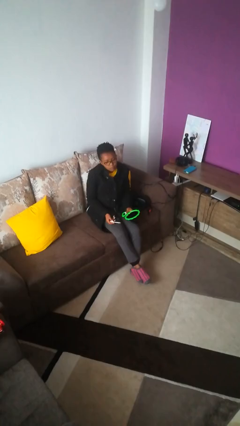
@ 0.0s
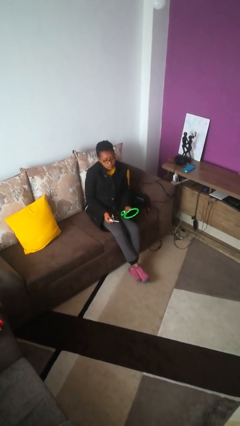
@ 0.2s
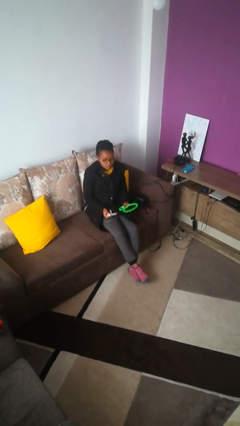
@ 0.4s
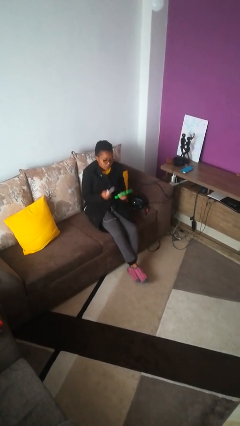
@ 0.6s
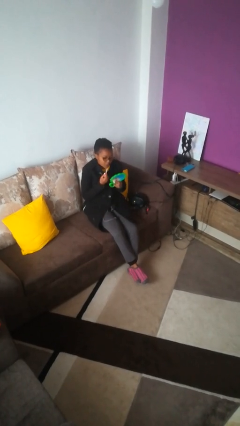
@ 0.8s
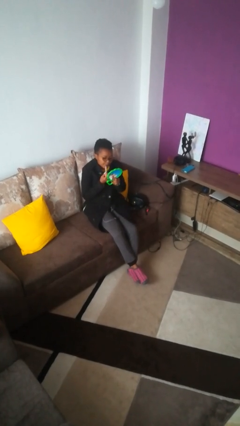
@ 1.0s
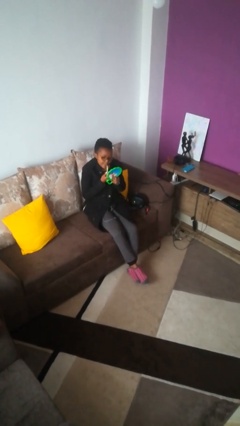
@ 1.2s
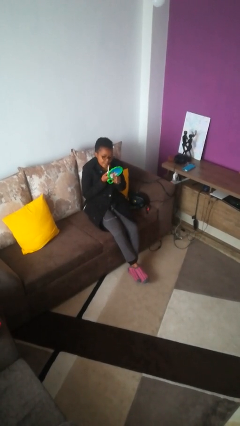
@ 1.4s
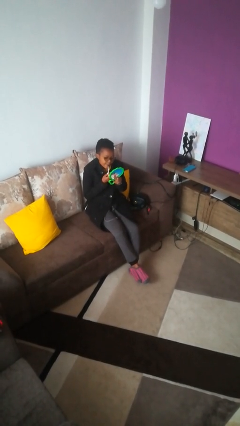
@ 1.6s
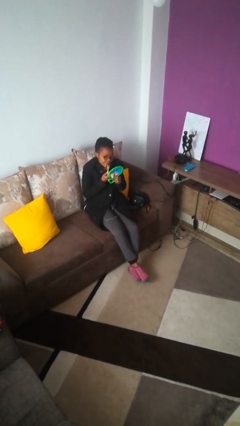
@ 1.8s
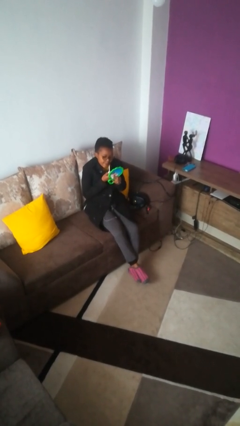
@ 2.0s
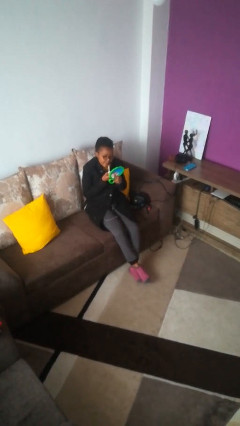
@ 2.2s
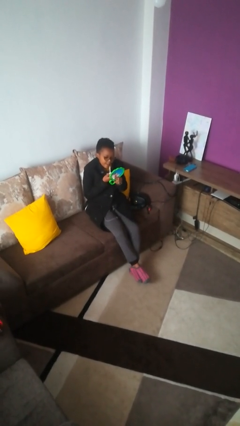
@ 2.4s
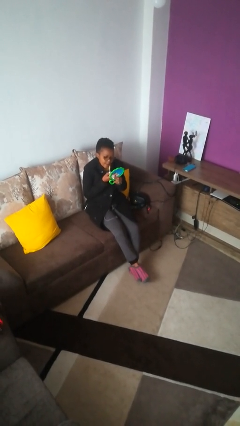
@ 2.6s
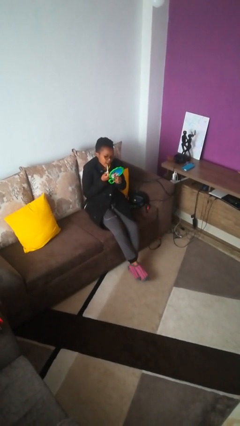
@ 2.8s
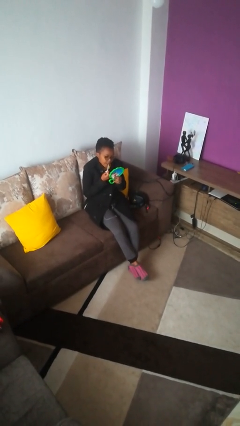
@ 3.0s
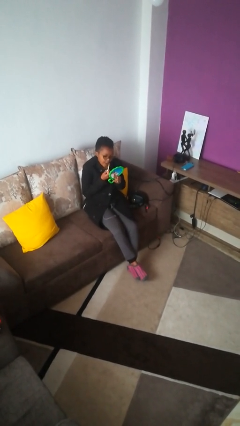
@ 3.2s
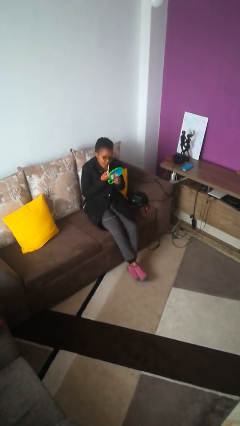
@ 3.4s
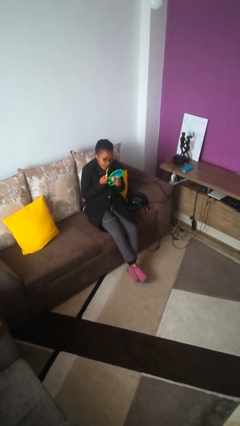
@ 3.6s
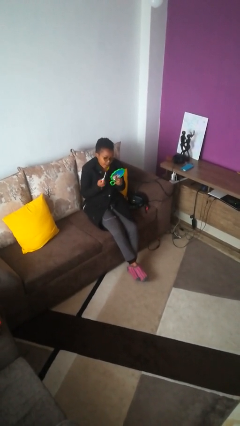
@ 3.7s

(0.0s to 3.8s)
person applies lip makeup

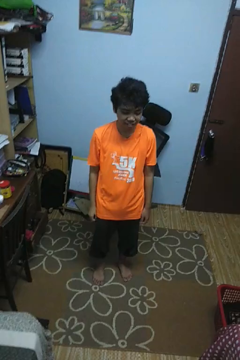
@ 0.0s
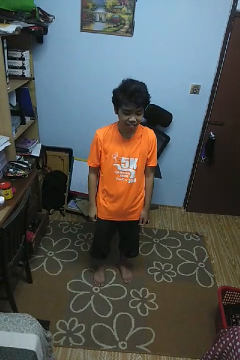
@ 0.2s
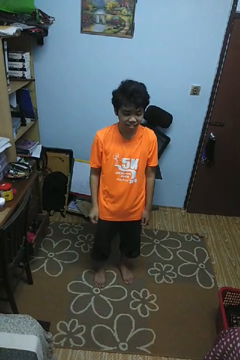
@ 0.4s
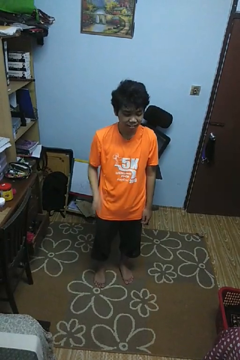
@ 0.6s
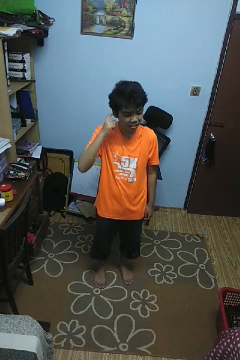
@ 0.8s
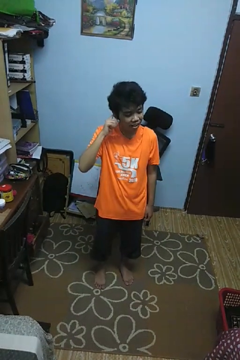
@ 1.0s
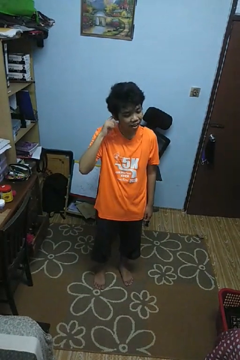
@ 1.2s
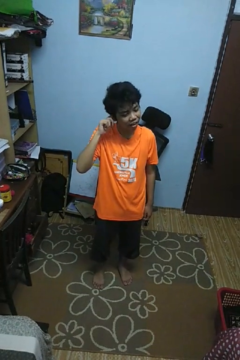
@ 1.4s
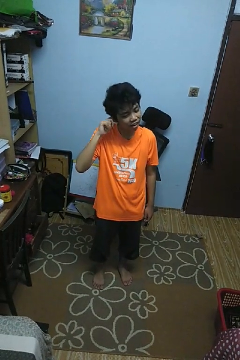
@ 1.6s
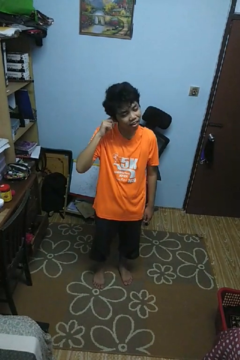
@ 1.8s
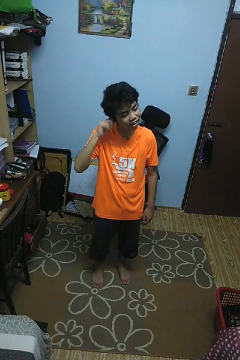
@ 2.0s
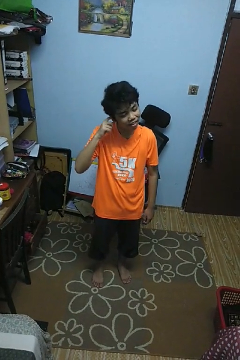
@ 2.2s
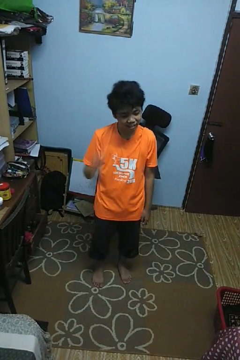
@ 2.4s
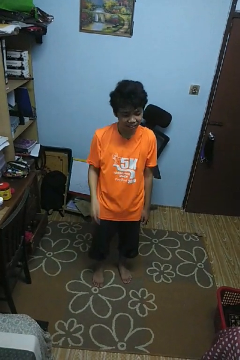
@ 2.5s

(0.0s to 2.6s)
person puts fingers in ear

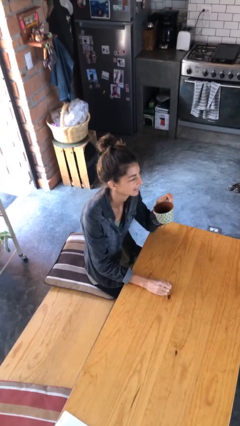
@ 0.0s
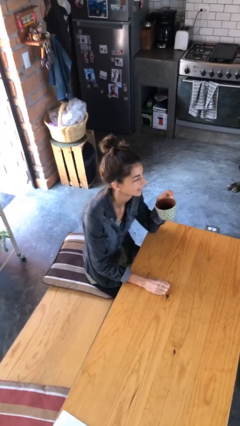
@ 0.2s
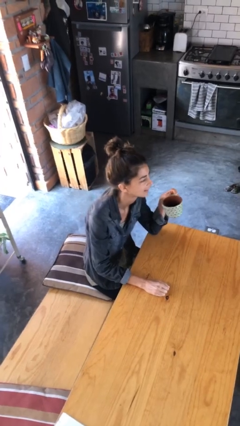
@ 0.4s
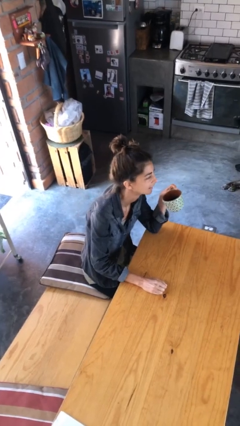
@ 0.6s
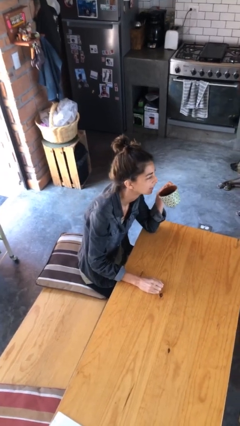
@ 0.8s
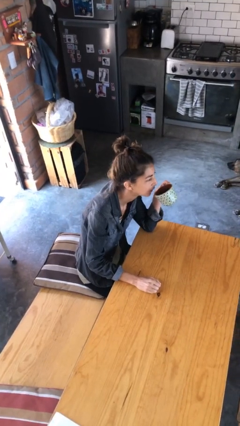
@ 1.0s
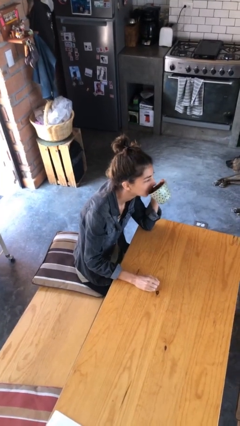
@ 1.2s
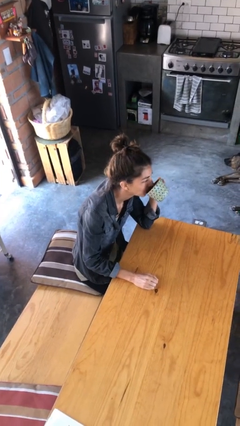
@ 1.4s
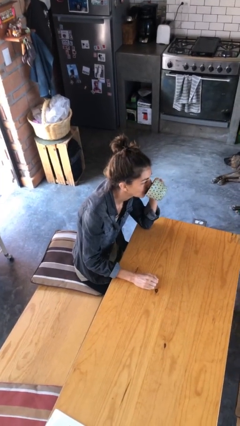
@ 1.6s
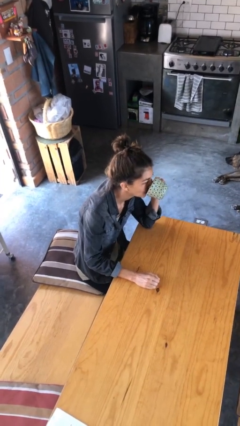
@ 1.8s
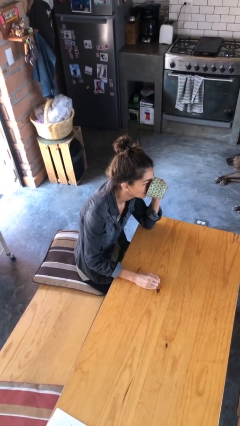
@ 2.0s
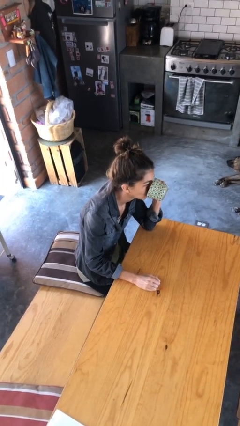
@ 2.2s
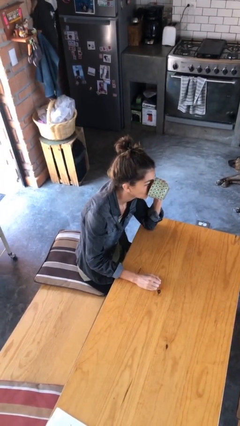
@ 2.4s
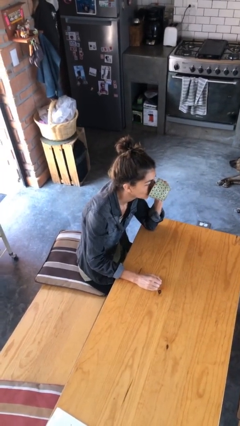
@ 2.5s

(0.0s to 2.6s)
person drinks from mug

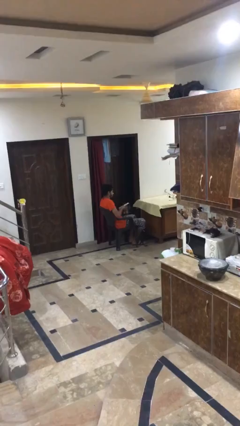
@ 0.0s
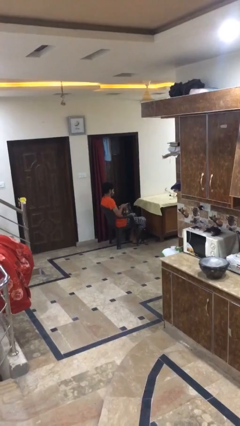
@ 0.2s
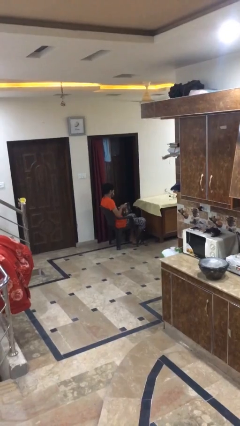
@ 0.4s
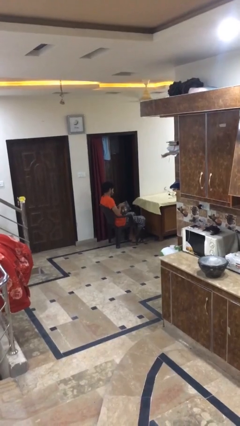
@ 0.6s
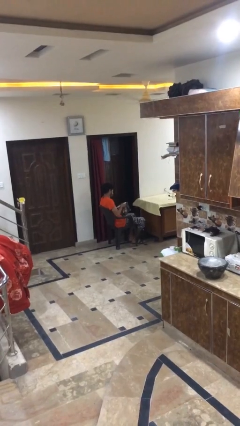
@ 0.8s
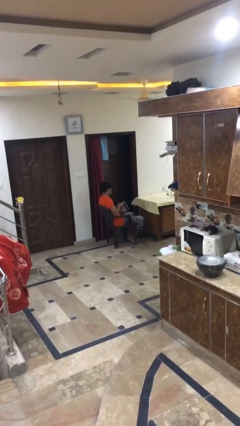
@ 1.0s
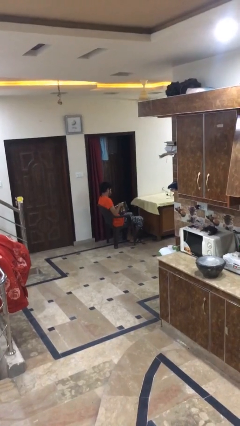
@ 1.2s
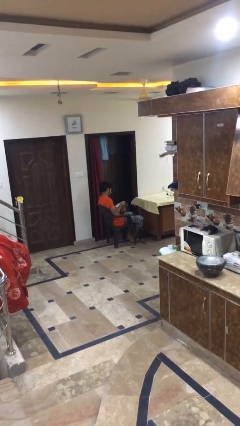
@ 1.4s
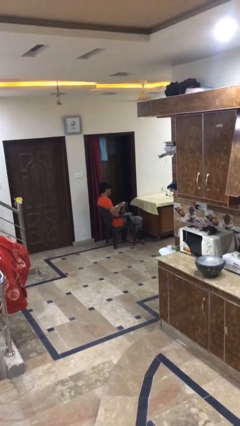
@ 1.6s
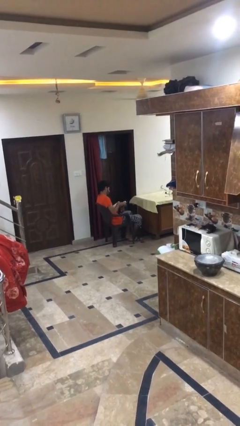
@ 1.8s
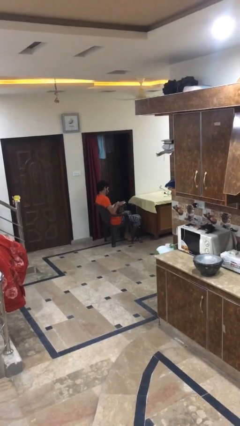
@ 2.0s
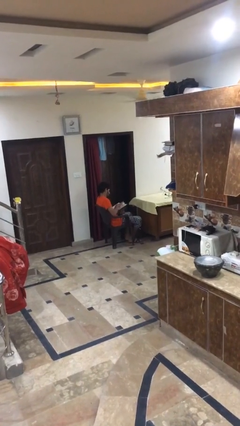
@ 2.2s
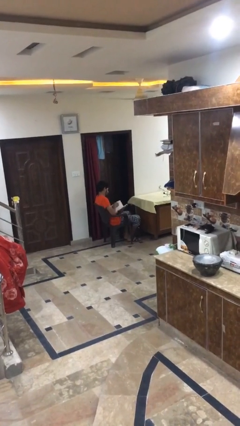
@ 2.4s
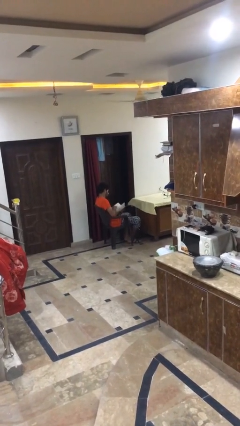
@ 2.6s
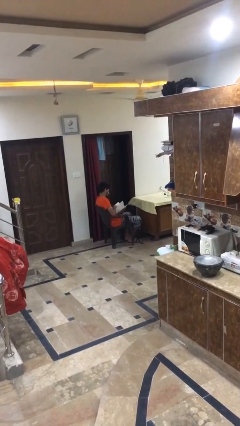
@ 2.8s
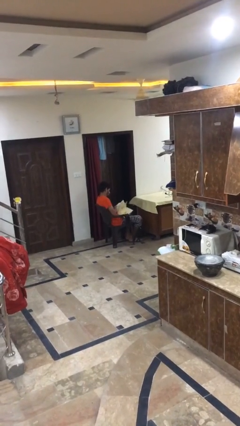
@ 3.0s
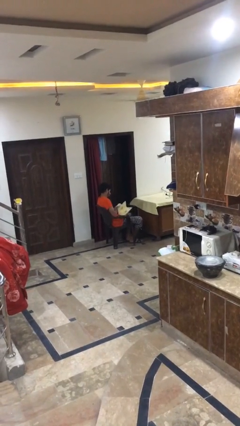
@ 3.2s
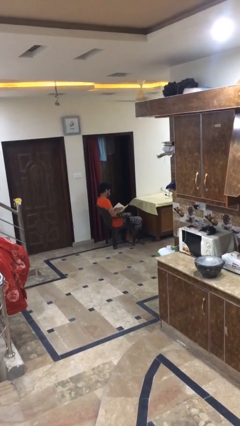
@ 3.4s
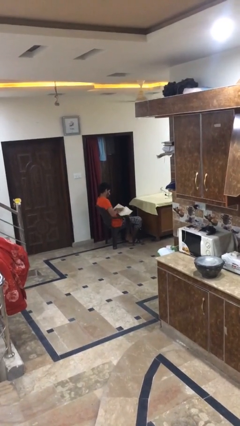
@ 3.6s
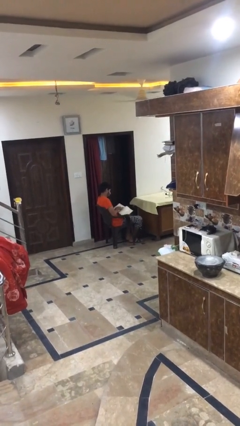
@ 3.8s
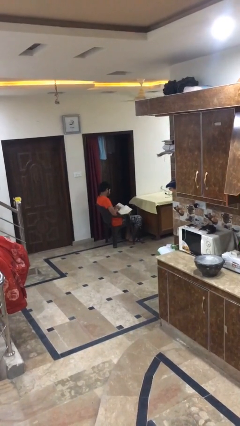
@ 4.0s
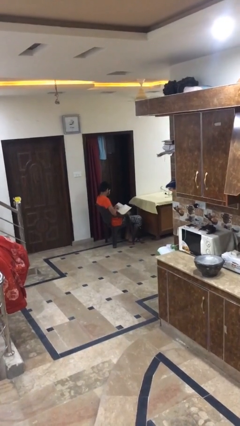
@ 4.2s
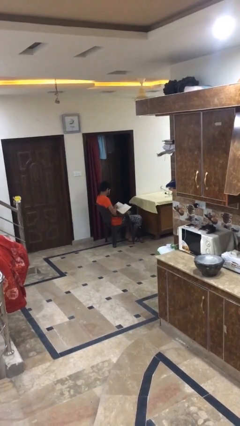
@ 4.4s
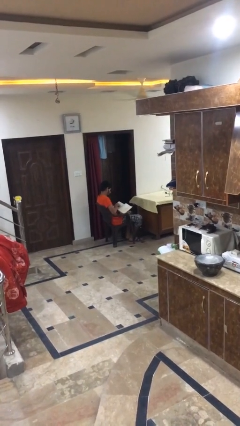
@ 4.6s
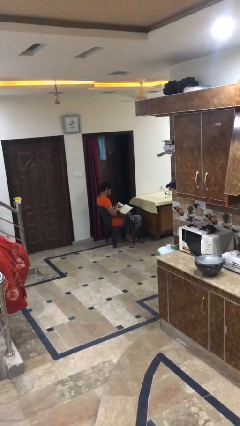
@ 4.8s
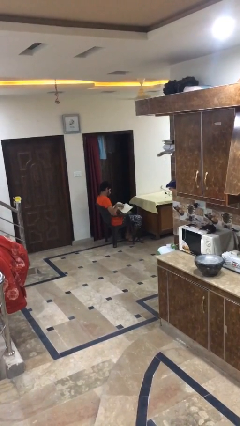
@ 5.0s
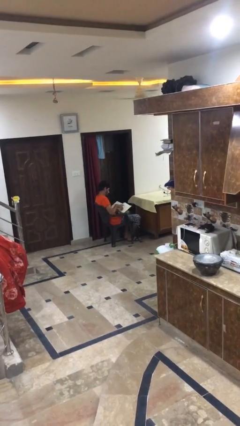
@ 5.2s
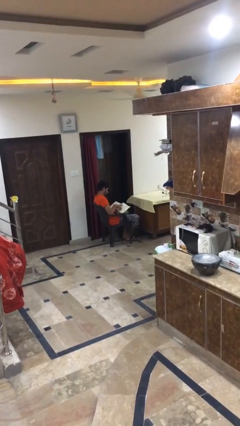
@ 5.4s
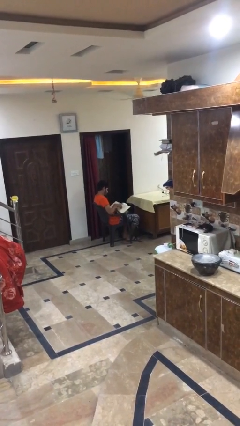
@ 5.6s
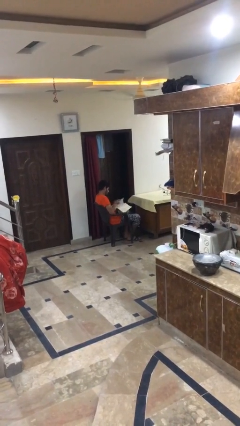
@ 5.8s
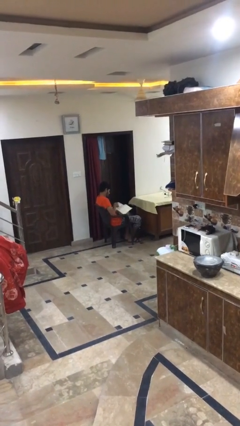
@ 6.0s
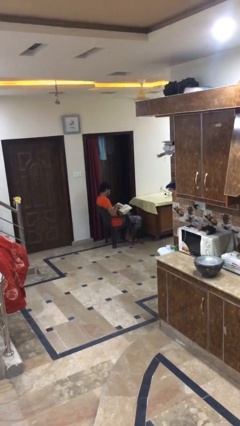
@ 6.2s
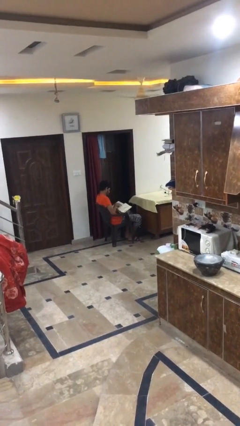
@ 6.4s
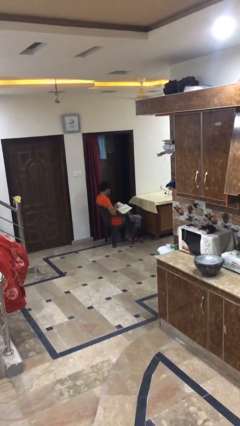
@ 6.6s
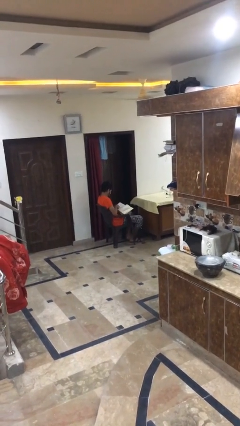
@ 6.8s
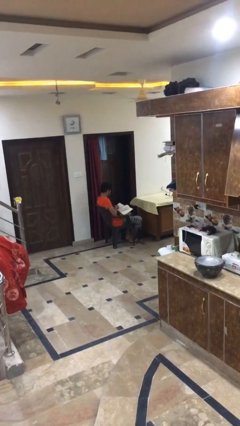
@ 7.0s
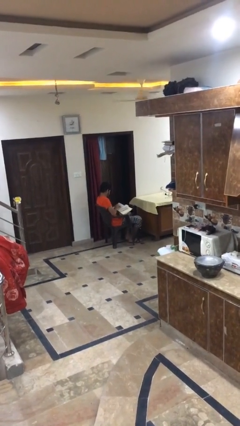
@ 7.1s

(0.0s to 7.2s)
person reads document

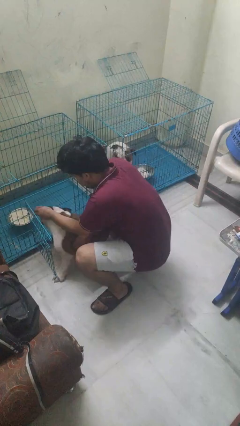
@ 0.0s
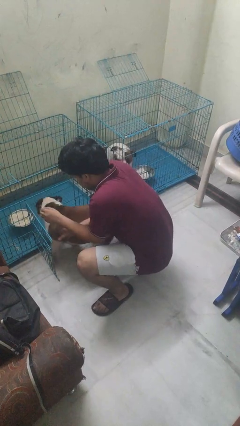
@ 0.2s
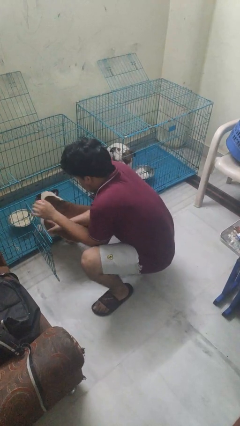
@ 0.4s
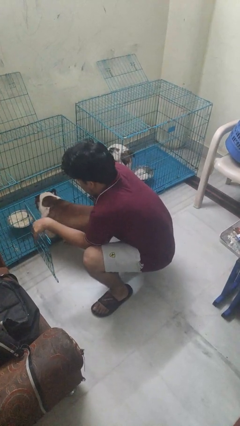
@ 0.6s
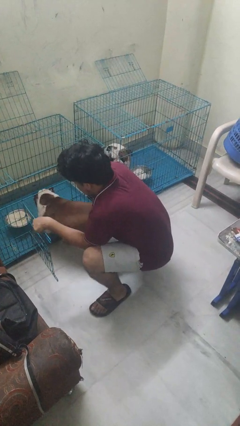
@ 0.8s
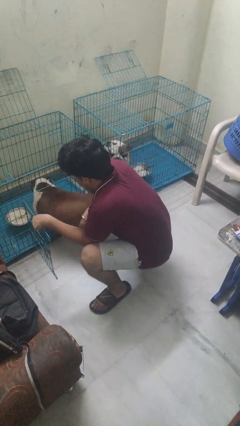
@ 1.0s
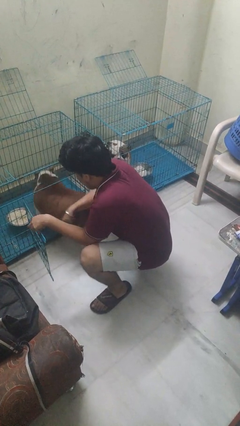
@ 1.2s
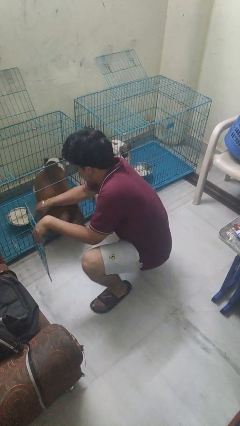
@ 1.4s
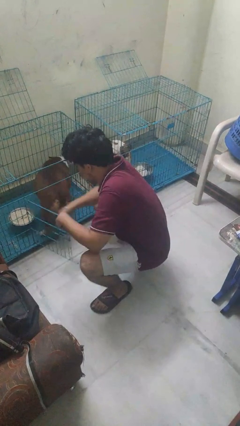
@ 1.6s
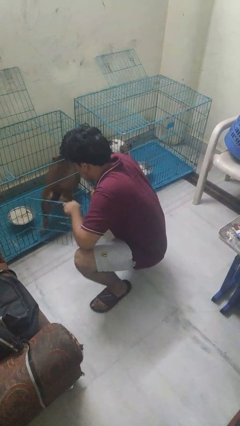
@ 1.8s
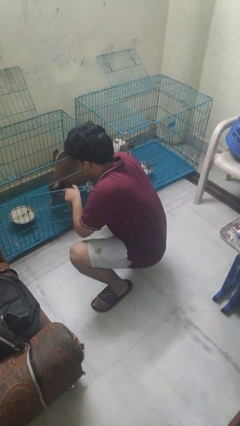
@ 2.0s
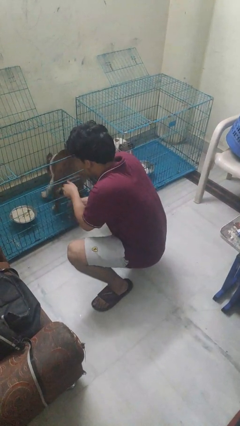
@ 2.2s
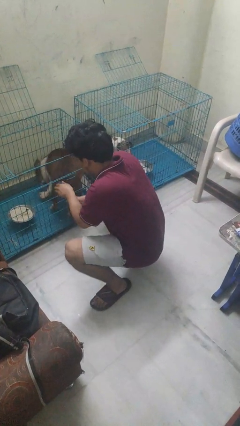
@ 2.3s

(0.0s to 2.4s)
person crates dog
